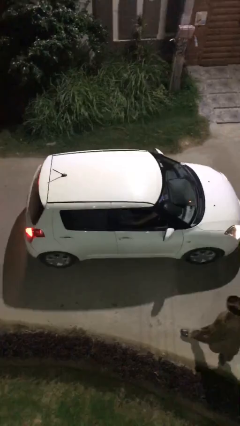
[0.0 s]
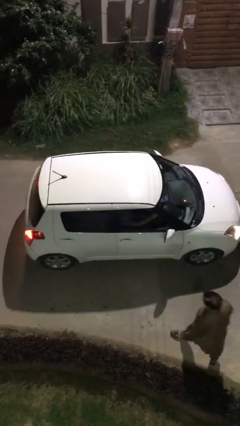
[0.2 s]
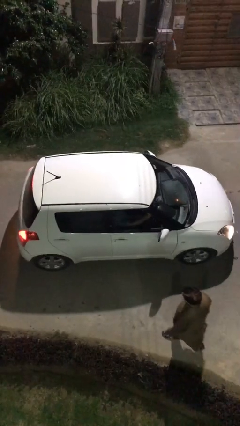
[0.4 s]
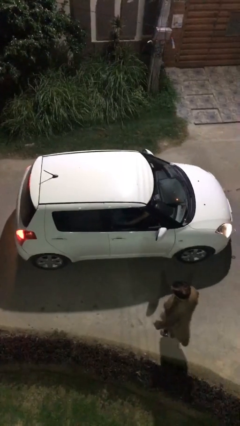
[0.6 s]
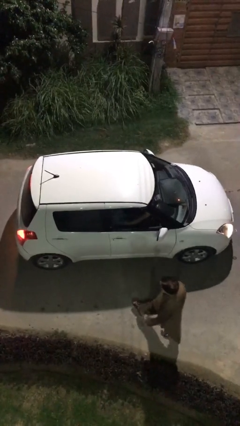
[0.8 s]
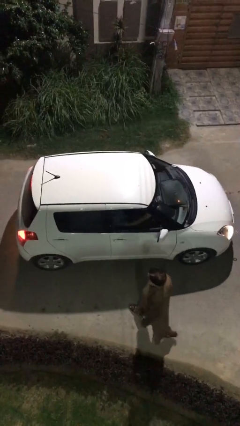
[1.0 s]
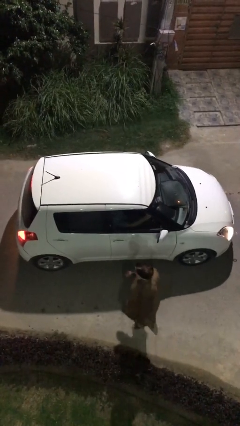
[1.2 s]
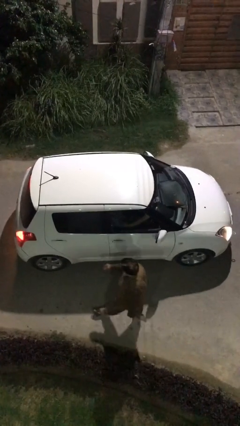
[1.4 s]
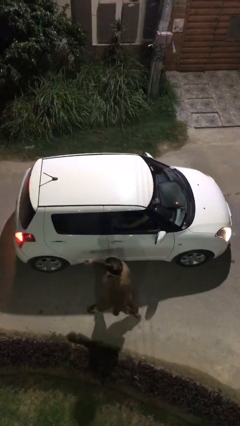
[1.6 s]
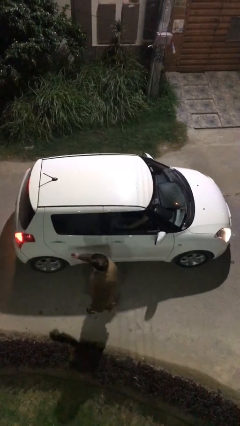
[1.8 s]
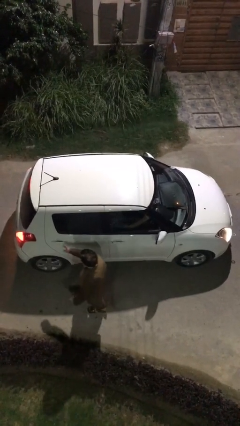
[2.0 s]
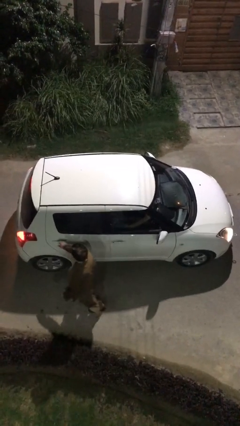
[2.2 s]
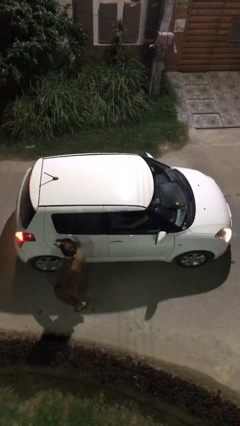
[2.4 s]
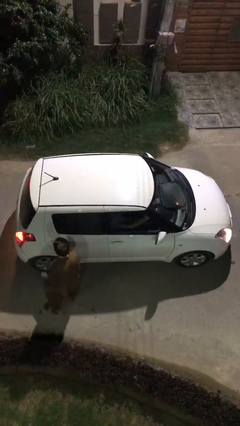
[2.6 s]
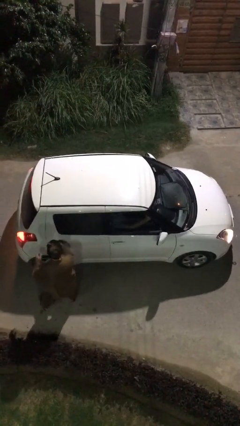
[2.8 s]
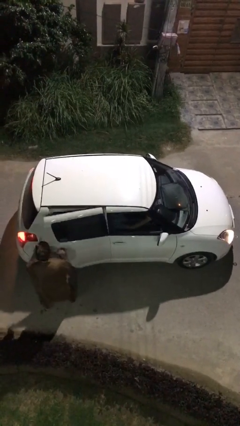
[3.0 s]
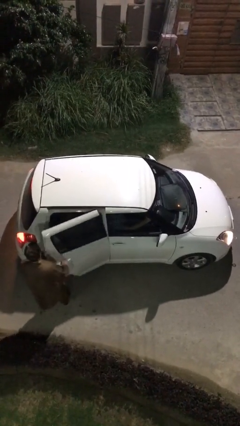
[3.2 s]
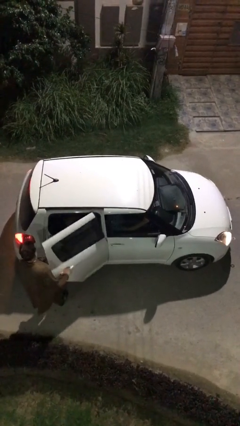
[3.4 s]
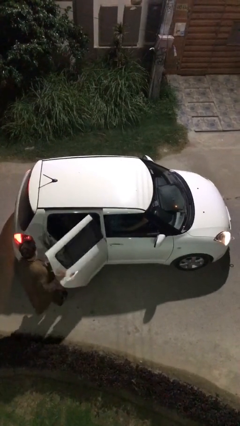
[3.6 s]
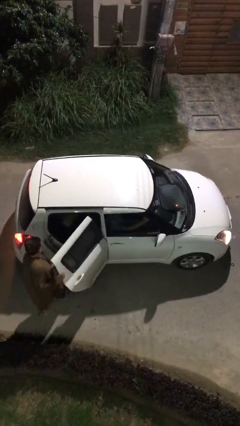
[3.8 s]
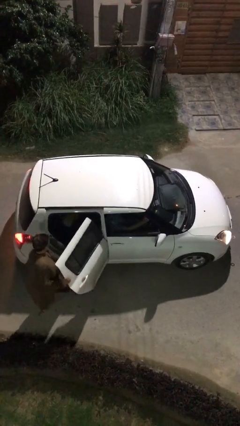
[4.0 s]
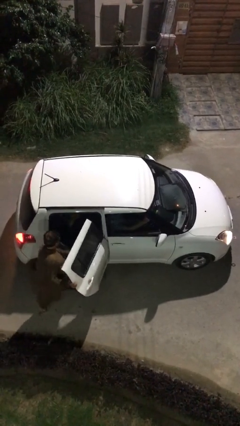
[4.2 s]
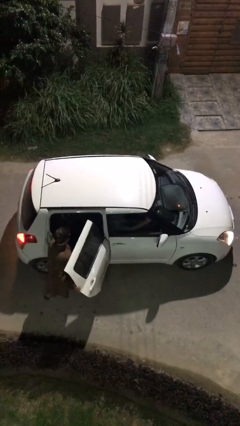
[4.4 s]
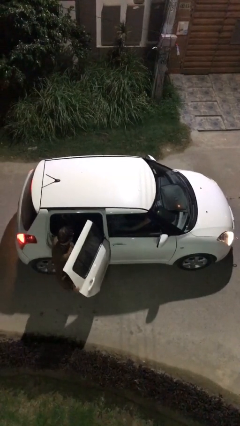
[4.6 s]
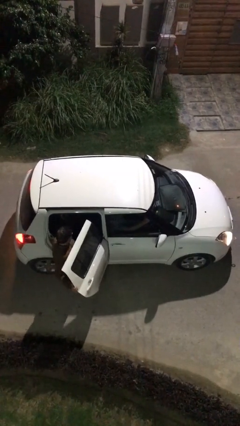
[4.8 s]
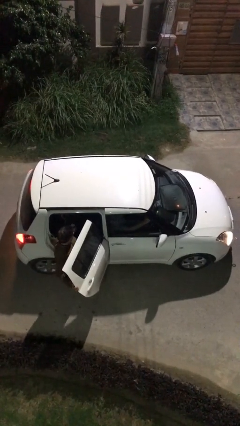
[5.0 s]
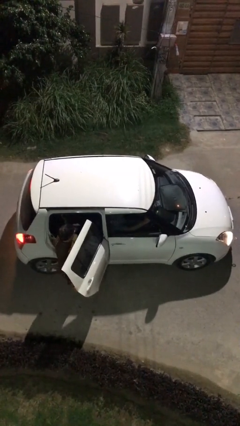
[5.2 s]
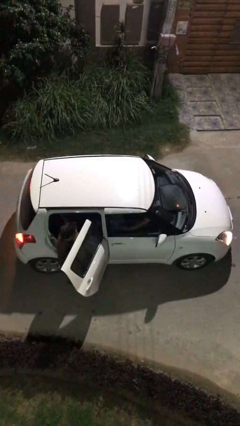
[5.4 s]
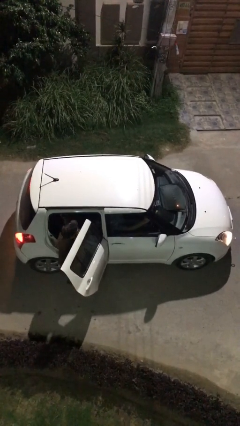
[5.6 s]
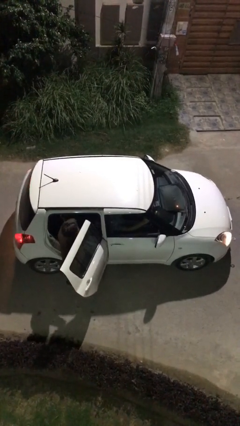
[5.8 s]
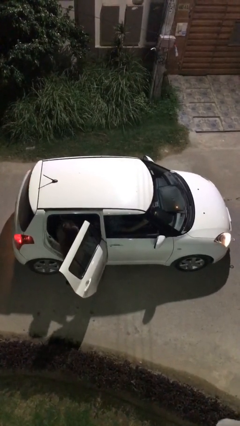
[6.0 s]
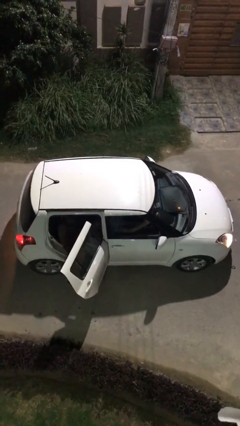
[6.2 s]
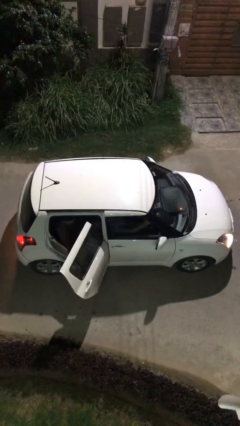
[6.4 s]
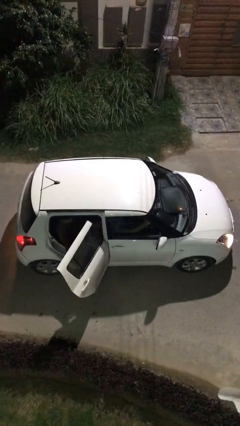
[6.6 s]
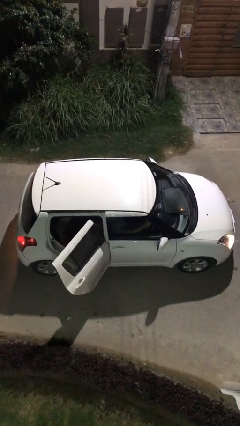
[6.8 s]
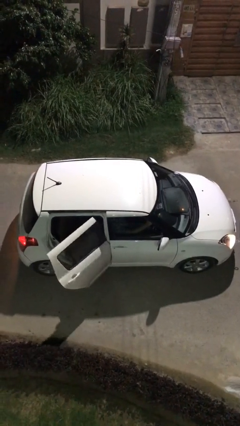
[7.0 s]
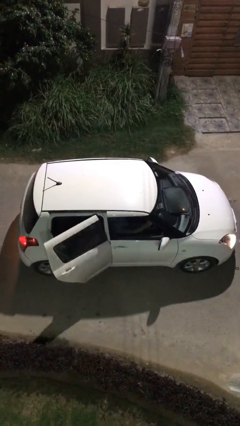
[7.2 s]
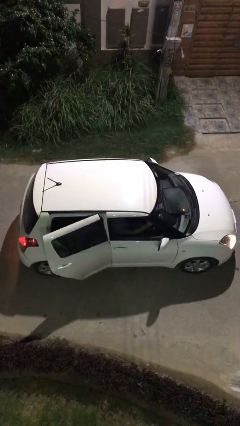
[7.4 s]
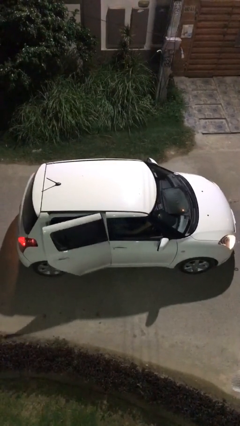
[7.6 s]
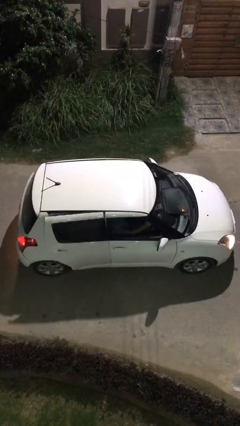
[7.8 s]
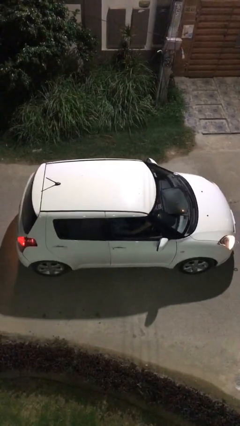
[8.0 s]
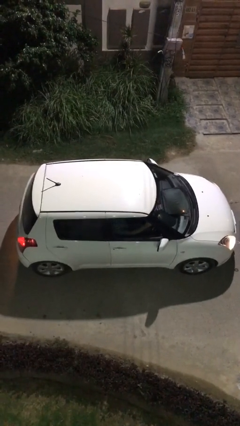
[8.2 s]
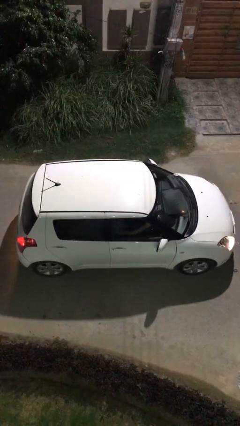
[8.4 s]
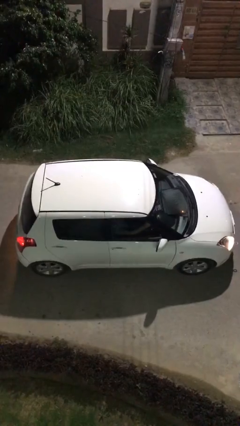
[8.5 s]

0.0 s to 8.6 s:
car picks up person

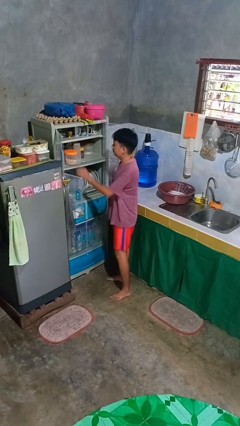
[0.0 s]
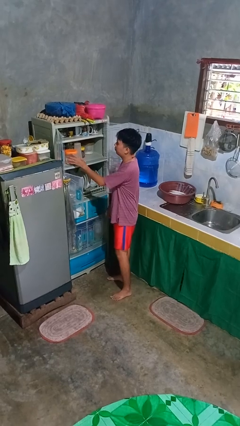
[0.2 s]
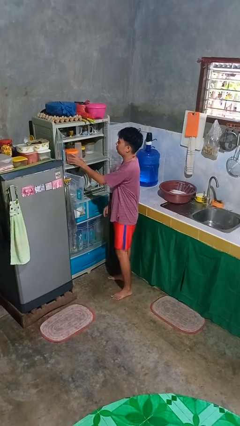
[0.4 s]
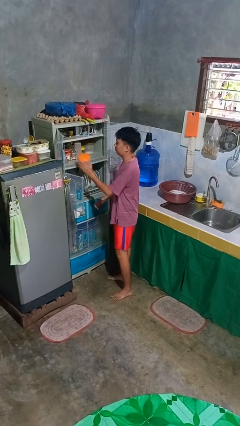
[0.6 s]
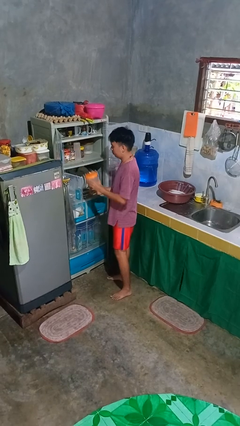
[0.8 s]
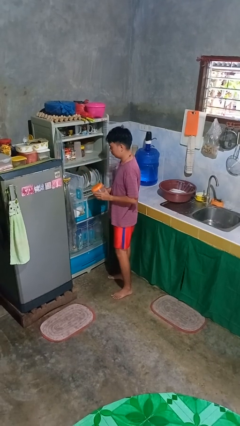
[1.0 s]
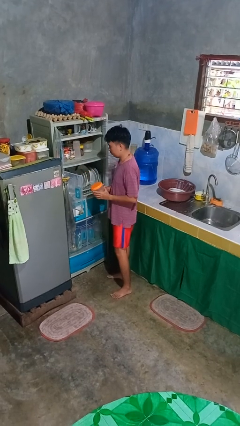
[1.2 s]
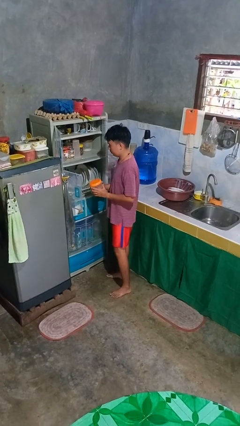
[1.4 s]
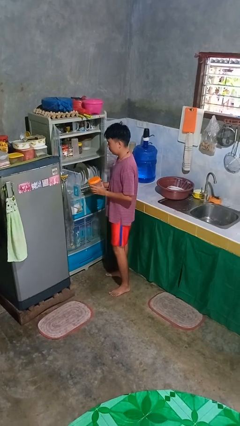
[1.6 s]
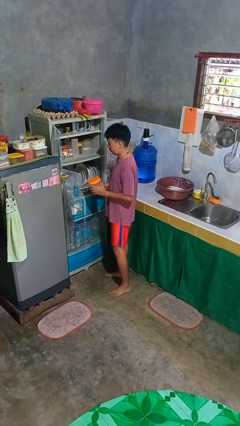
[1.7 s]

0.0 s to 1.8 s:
person takes object from cabinet

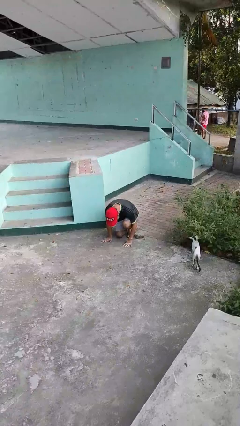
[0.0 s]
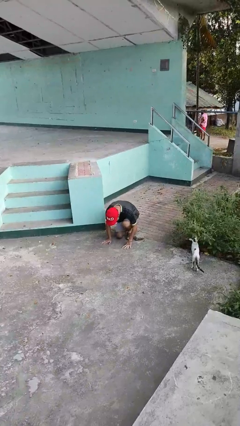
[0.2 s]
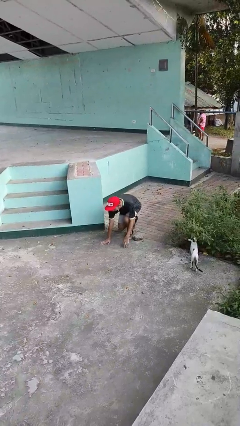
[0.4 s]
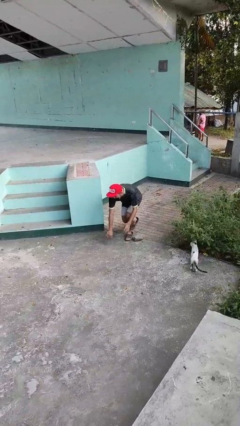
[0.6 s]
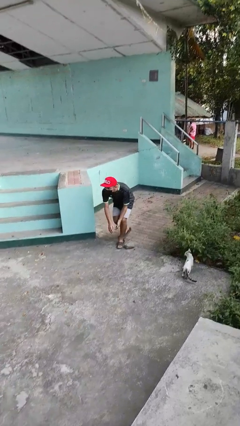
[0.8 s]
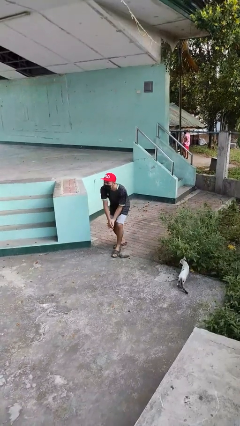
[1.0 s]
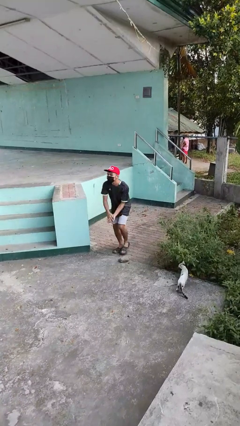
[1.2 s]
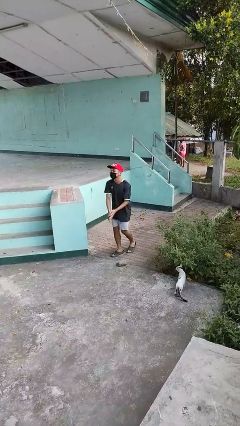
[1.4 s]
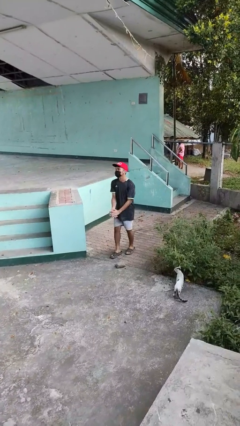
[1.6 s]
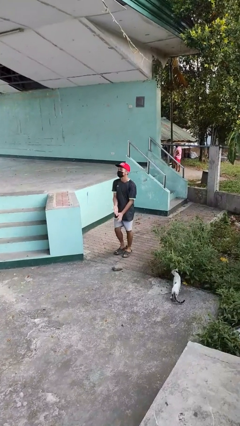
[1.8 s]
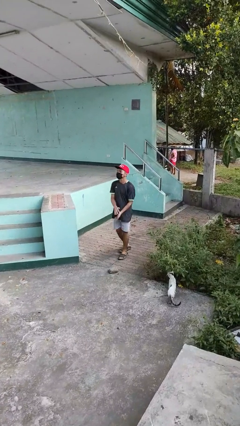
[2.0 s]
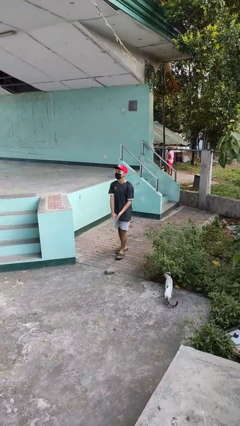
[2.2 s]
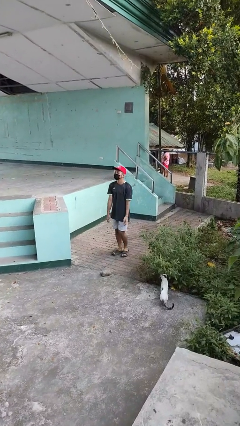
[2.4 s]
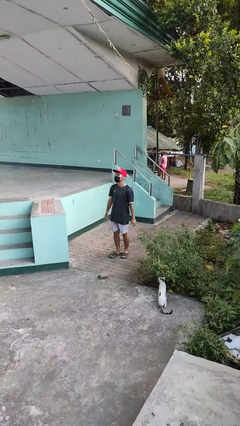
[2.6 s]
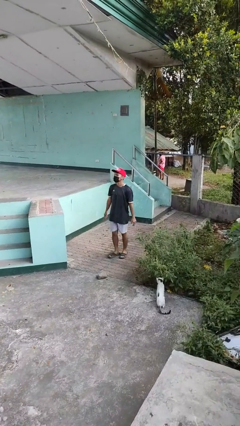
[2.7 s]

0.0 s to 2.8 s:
person stands up from floor

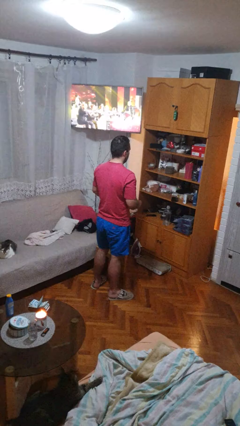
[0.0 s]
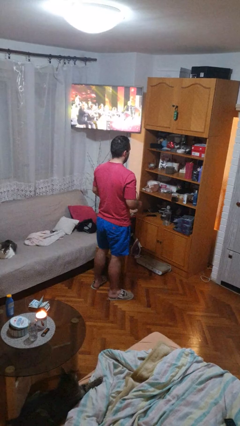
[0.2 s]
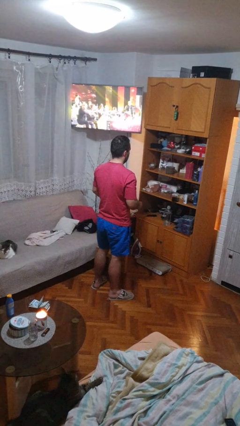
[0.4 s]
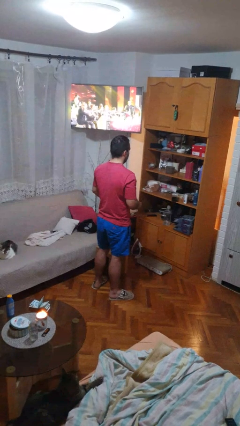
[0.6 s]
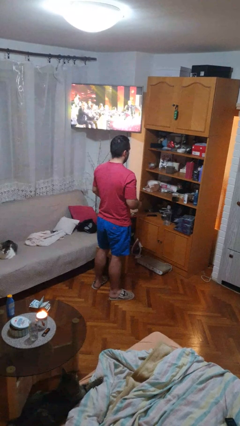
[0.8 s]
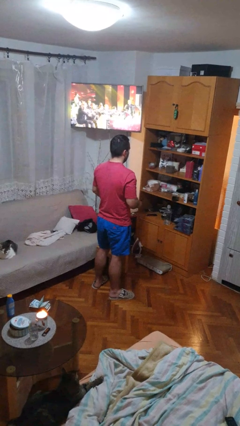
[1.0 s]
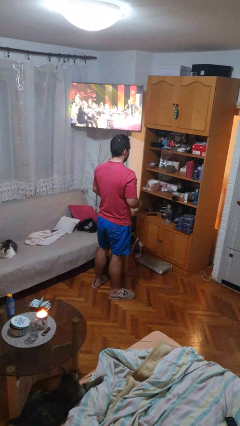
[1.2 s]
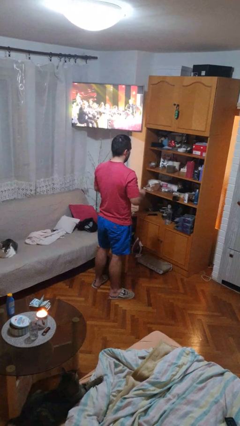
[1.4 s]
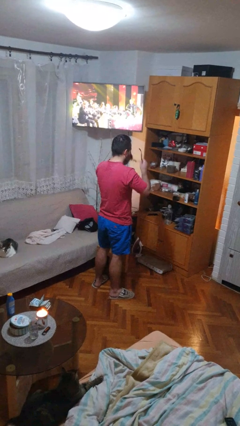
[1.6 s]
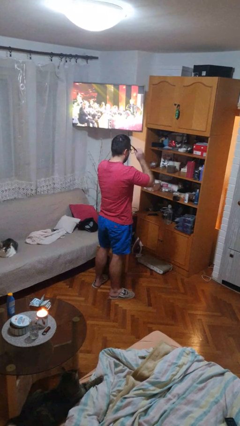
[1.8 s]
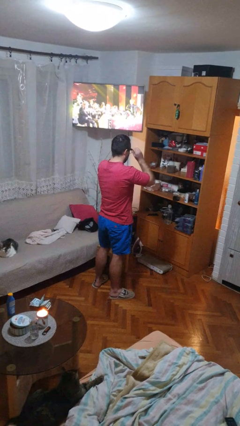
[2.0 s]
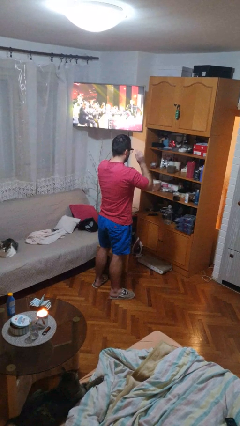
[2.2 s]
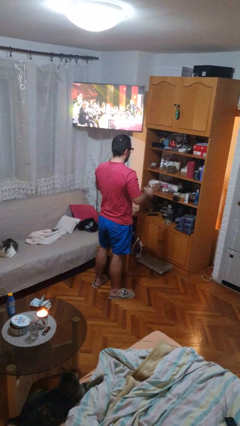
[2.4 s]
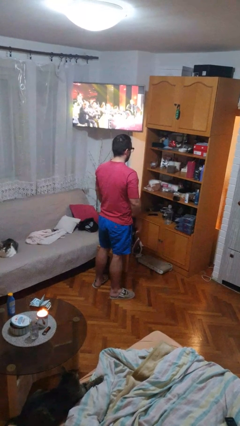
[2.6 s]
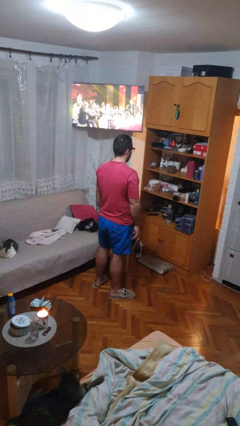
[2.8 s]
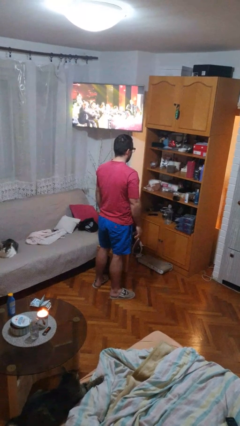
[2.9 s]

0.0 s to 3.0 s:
person puts on glasses

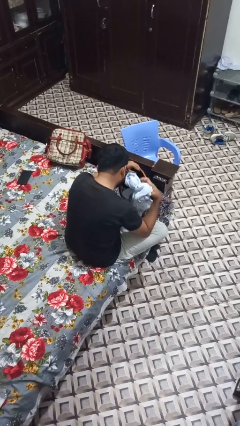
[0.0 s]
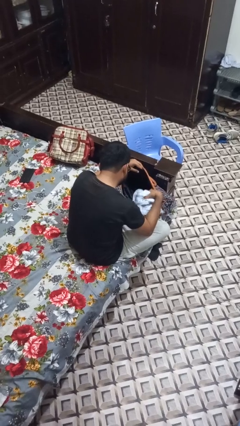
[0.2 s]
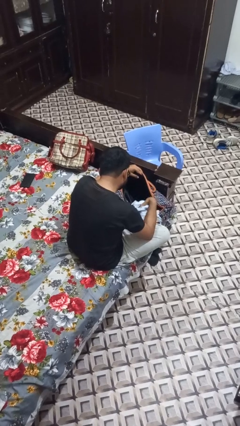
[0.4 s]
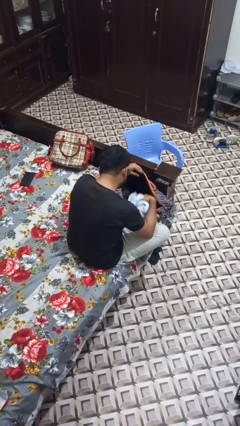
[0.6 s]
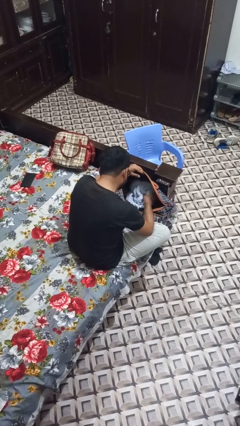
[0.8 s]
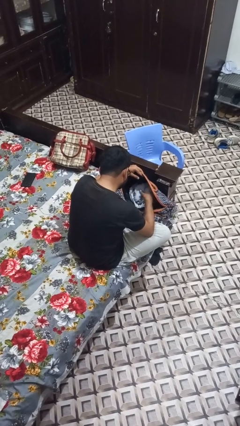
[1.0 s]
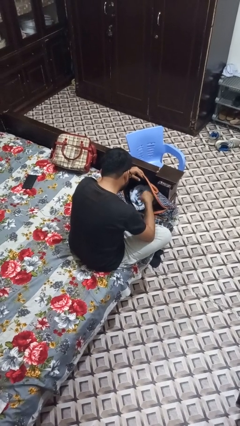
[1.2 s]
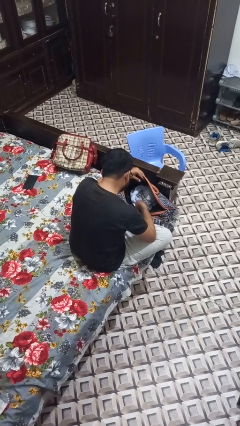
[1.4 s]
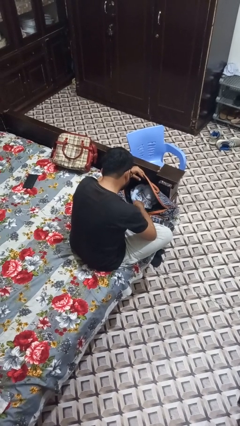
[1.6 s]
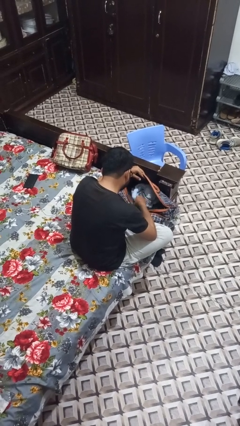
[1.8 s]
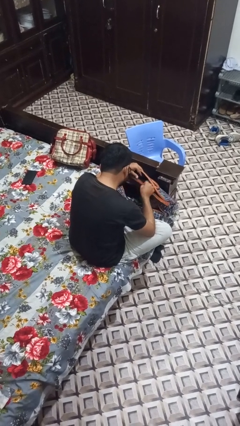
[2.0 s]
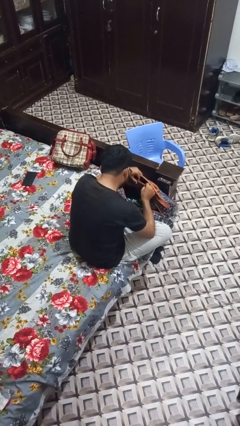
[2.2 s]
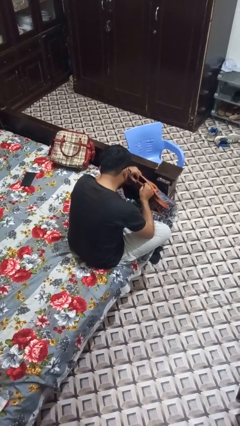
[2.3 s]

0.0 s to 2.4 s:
person puts object into backpack
